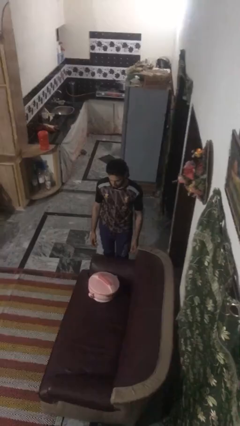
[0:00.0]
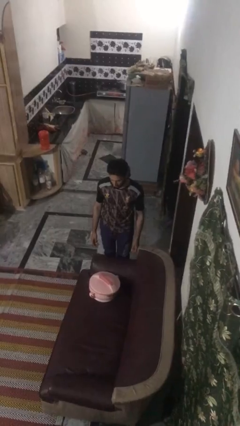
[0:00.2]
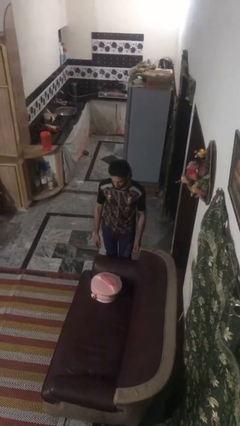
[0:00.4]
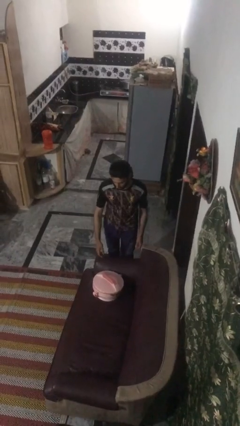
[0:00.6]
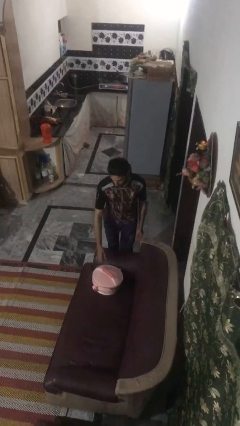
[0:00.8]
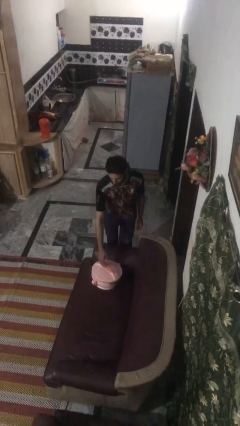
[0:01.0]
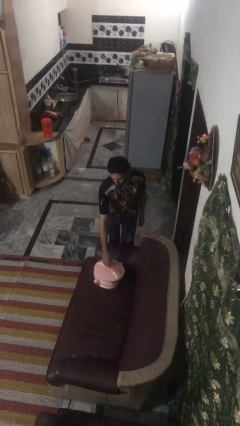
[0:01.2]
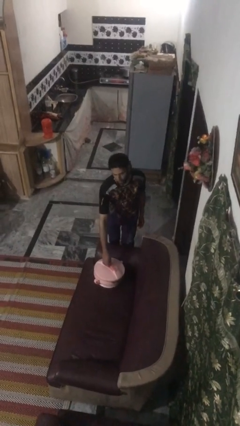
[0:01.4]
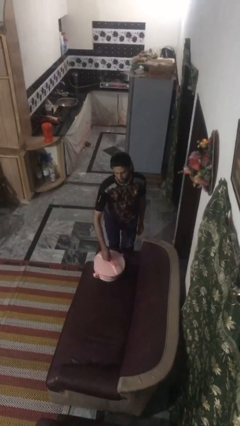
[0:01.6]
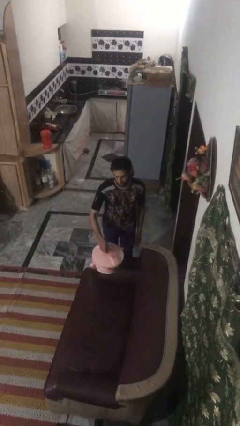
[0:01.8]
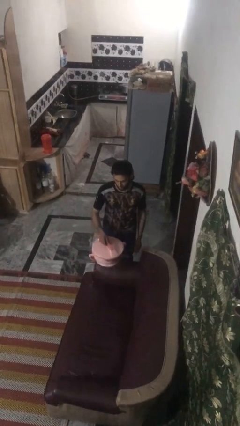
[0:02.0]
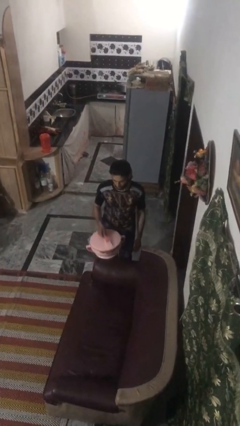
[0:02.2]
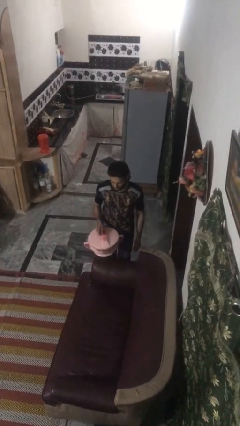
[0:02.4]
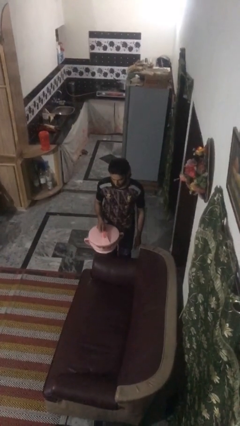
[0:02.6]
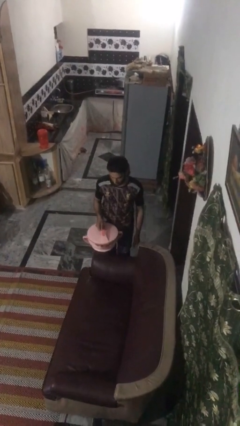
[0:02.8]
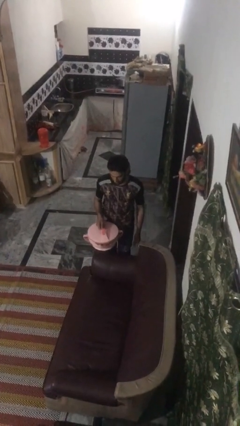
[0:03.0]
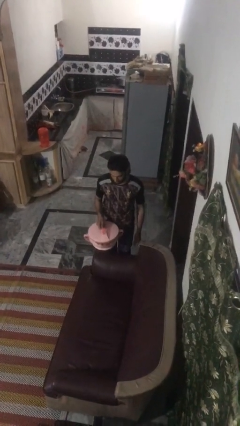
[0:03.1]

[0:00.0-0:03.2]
person picks up object from couch

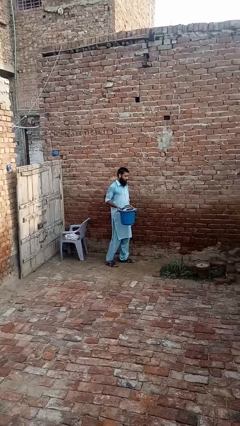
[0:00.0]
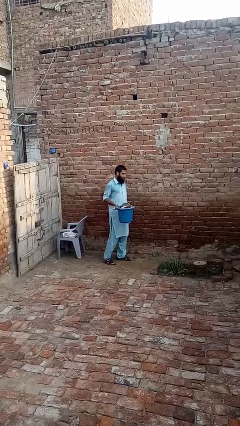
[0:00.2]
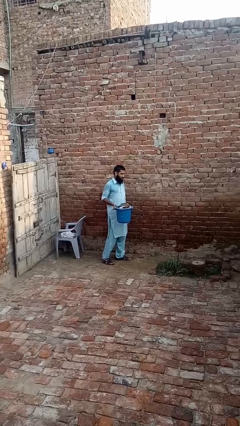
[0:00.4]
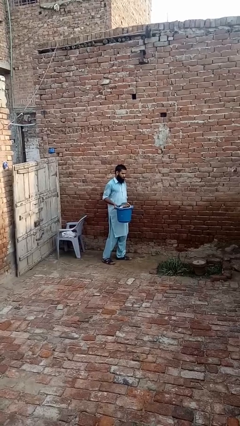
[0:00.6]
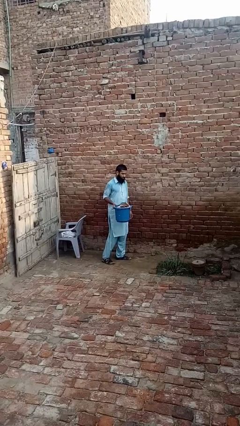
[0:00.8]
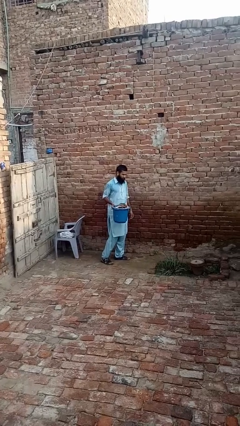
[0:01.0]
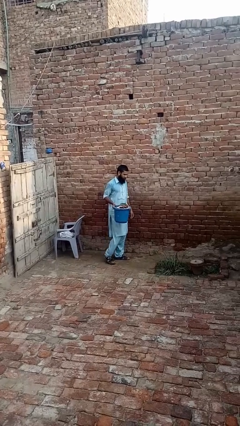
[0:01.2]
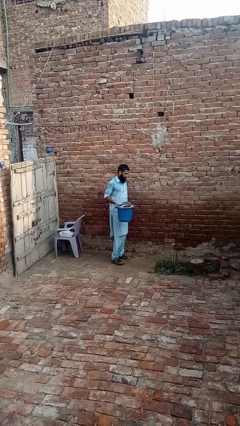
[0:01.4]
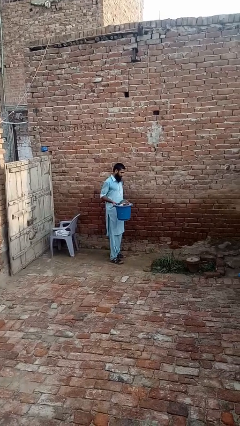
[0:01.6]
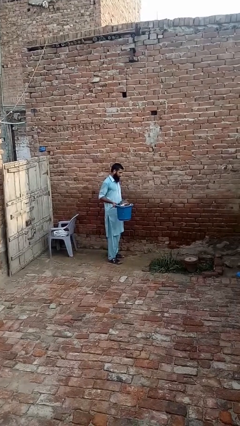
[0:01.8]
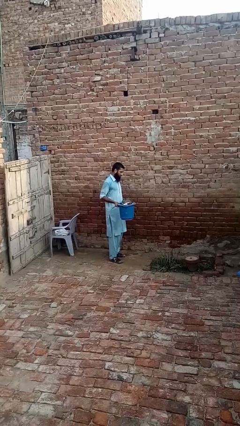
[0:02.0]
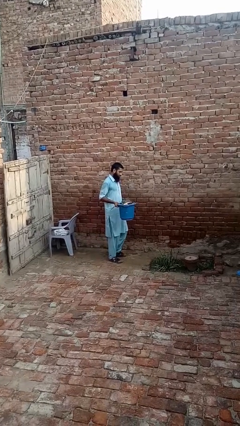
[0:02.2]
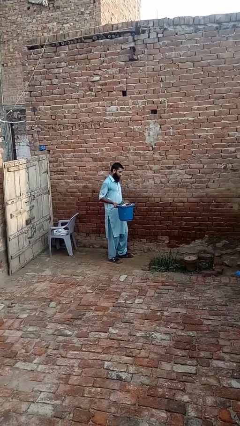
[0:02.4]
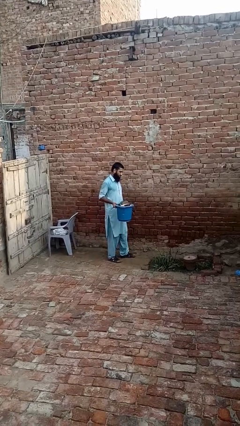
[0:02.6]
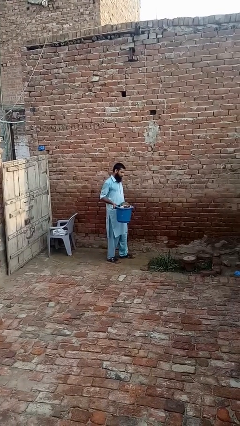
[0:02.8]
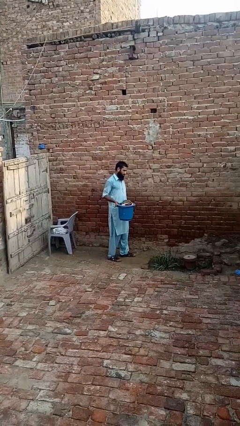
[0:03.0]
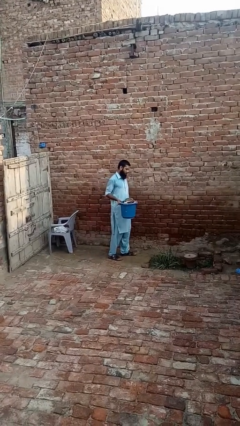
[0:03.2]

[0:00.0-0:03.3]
person carries laundry basket

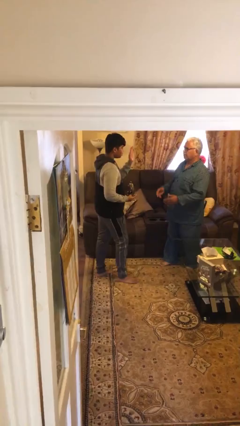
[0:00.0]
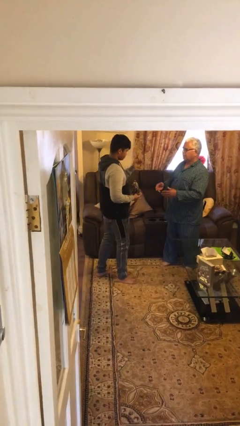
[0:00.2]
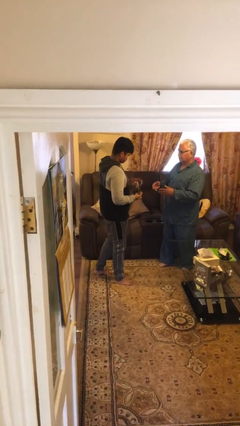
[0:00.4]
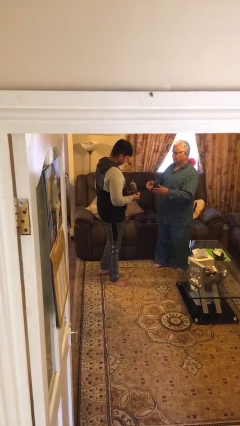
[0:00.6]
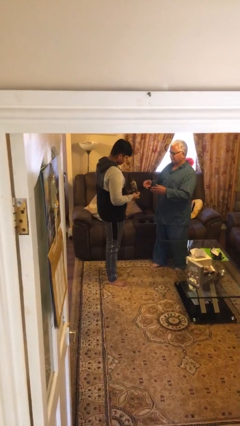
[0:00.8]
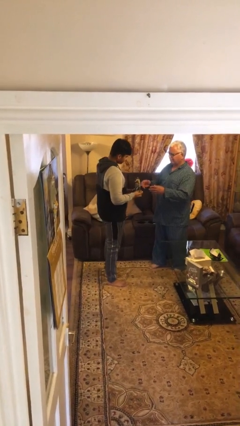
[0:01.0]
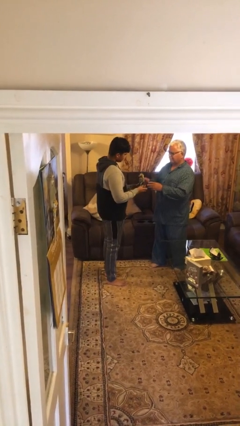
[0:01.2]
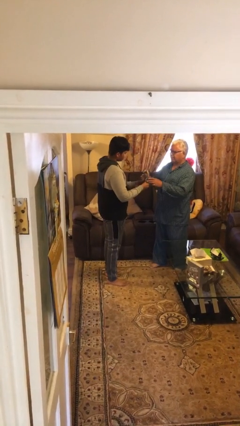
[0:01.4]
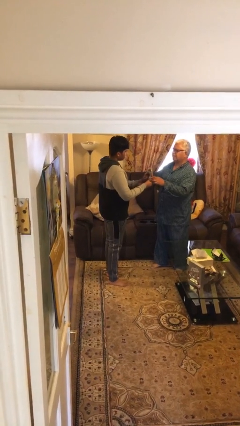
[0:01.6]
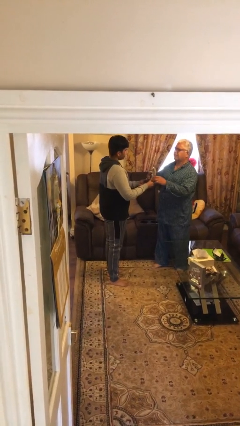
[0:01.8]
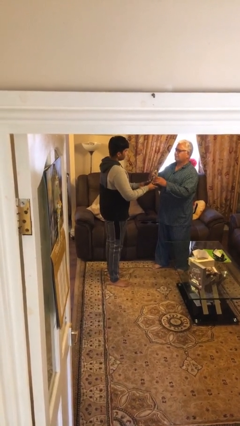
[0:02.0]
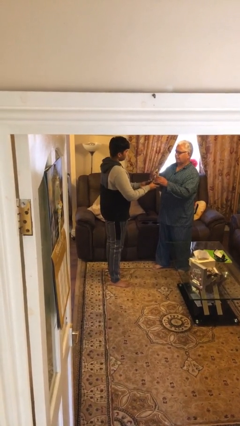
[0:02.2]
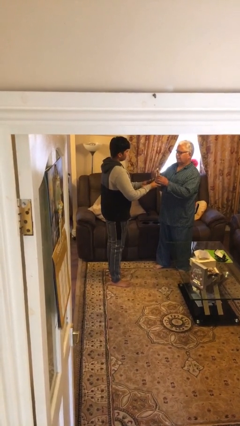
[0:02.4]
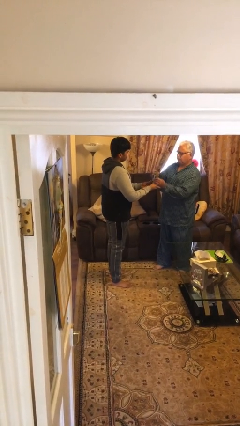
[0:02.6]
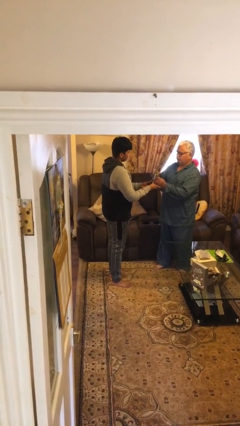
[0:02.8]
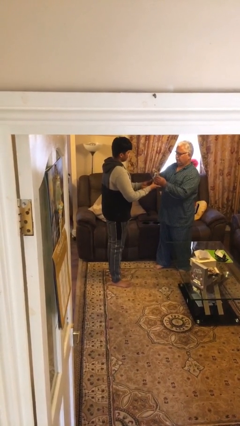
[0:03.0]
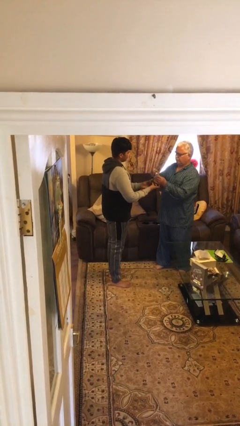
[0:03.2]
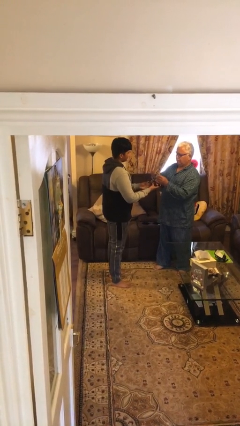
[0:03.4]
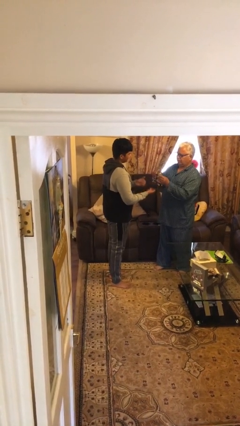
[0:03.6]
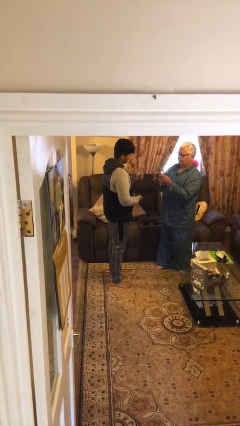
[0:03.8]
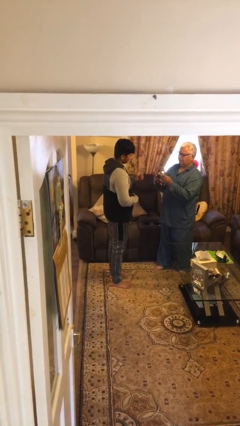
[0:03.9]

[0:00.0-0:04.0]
person transfers object to person

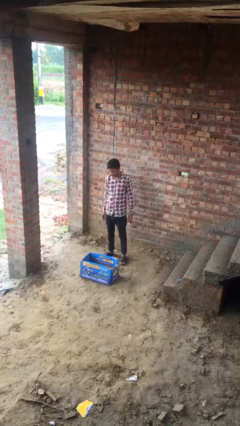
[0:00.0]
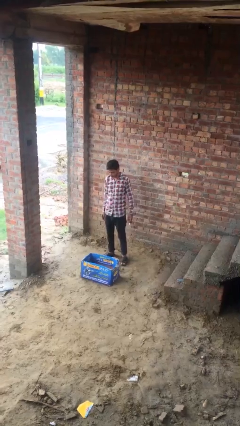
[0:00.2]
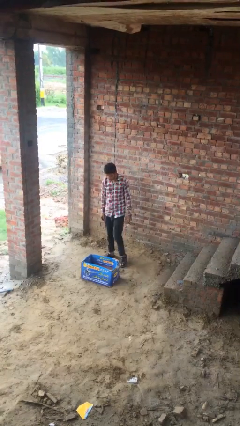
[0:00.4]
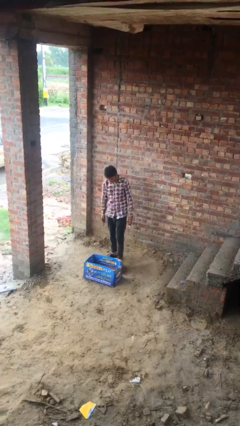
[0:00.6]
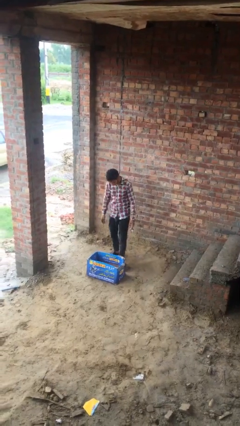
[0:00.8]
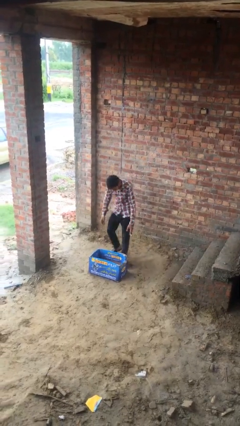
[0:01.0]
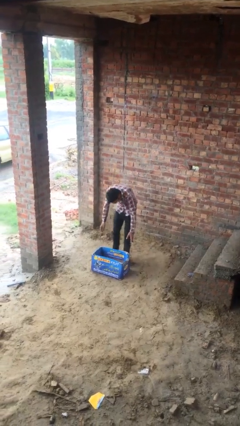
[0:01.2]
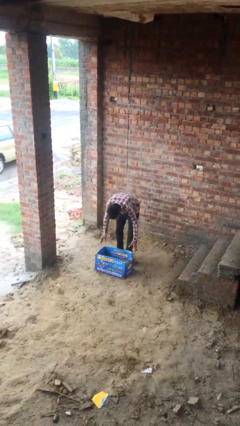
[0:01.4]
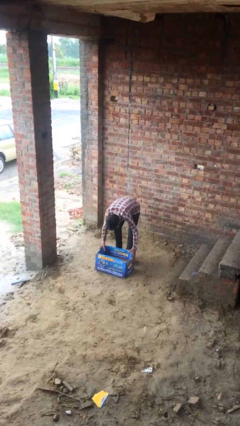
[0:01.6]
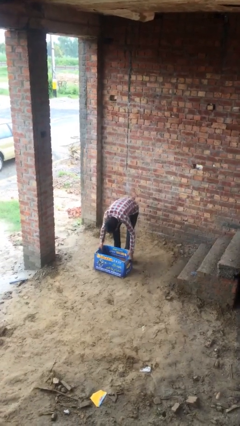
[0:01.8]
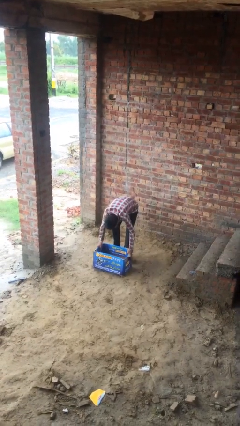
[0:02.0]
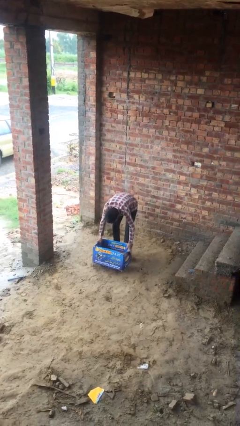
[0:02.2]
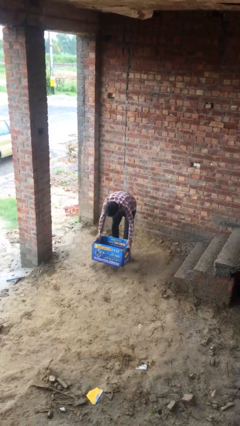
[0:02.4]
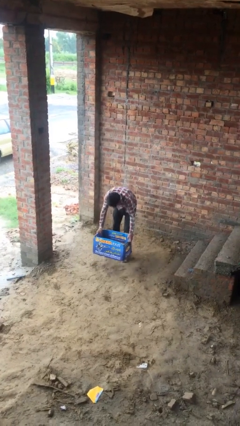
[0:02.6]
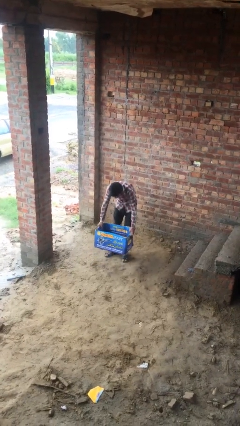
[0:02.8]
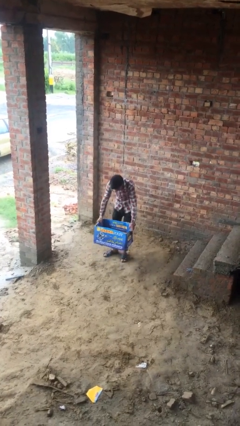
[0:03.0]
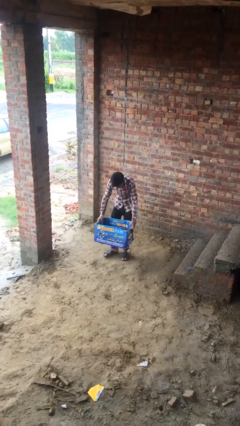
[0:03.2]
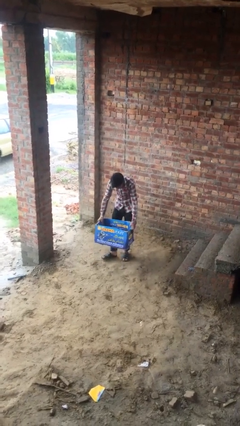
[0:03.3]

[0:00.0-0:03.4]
person picks up object from floor

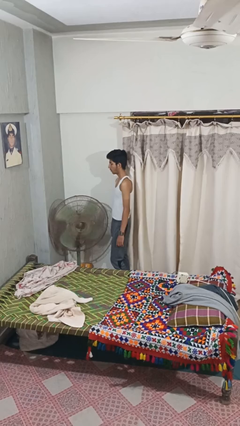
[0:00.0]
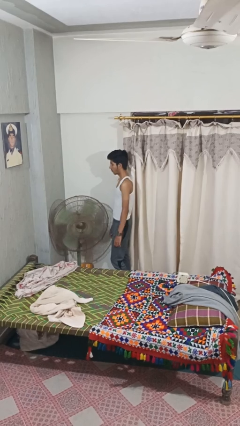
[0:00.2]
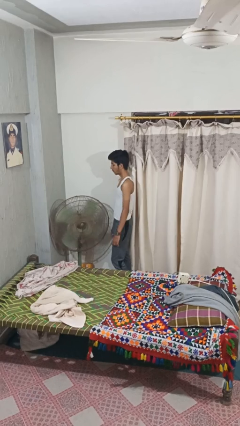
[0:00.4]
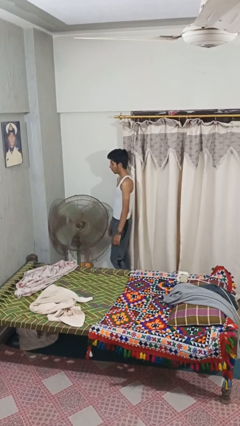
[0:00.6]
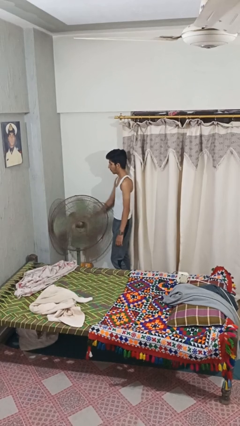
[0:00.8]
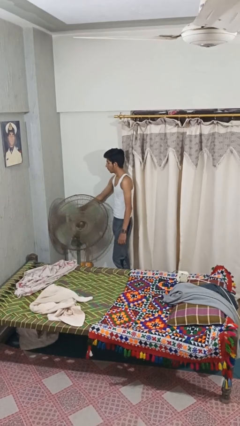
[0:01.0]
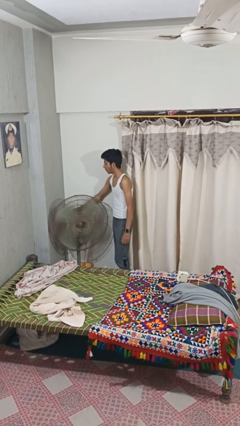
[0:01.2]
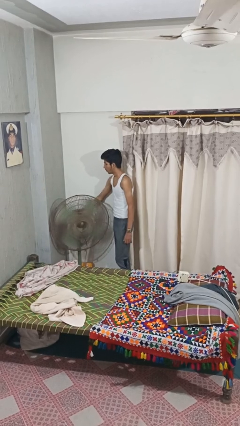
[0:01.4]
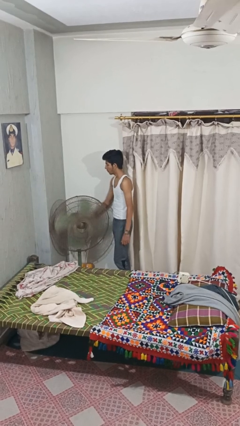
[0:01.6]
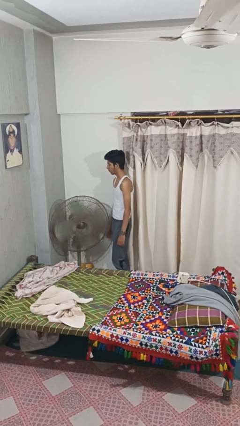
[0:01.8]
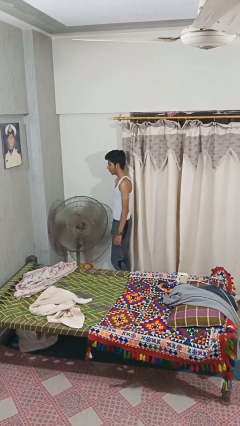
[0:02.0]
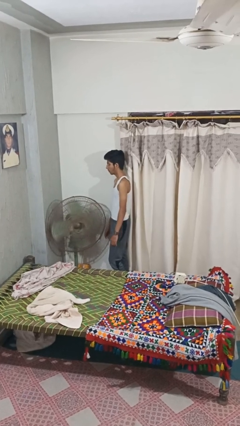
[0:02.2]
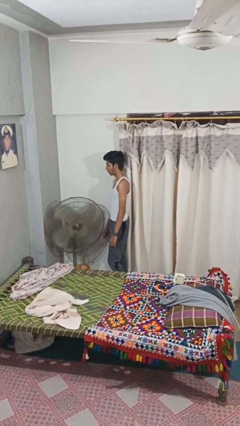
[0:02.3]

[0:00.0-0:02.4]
person turns off fan

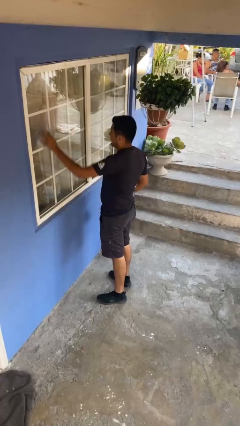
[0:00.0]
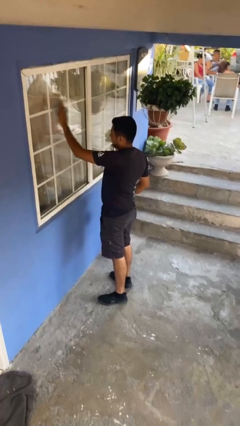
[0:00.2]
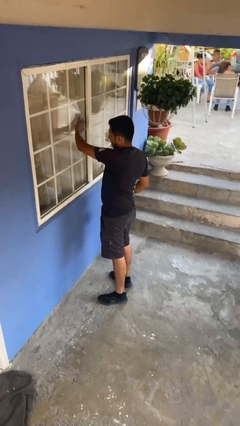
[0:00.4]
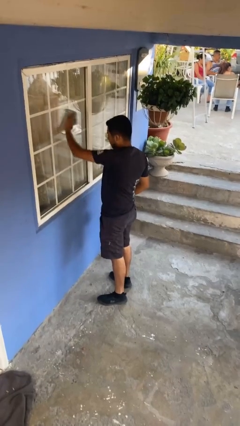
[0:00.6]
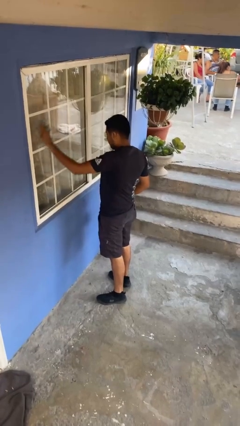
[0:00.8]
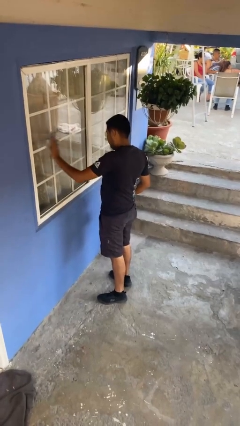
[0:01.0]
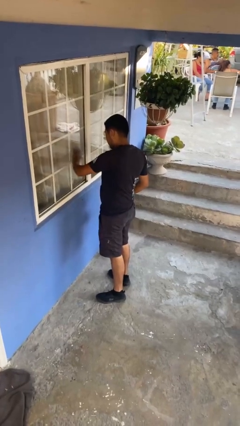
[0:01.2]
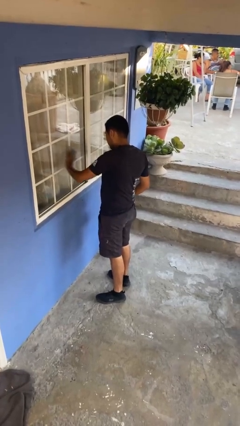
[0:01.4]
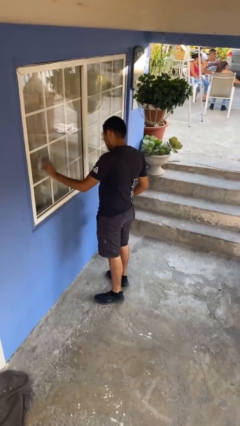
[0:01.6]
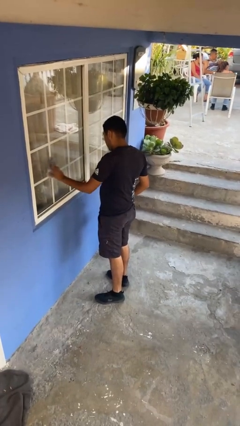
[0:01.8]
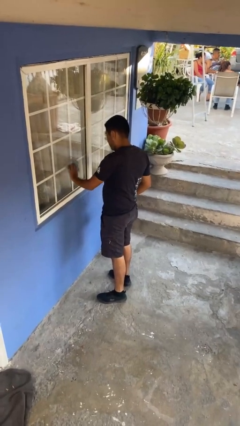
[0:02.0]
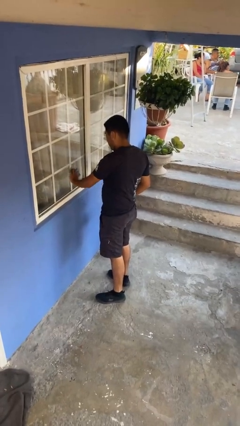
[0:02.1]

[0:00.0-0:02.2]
person washes window
